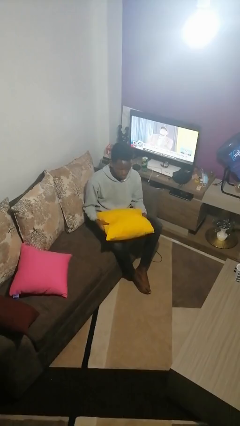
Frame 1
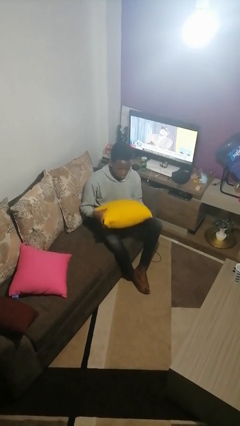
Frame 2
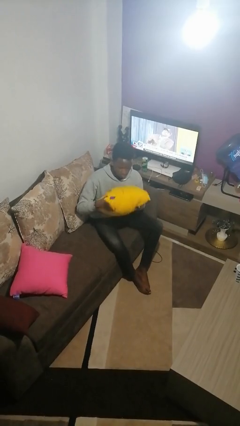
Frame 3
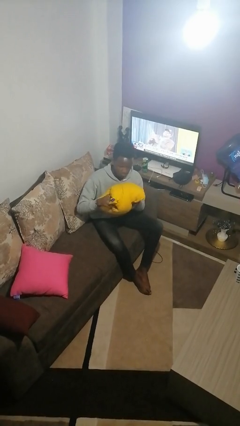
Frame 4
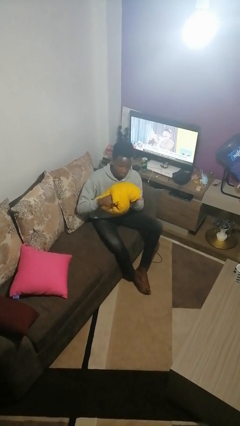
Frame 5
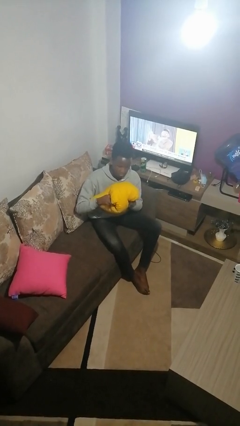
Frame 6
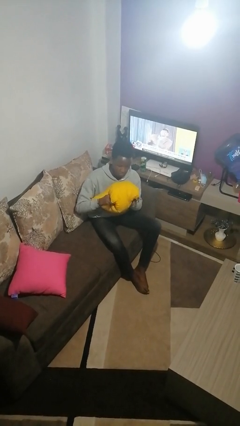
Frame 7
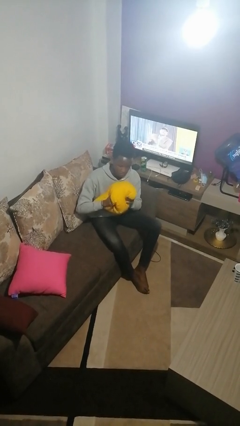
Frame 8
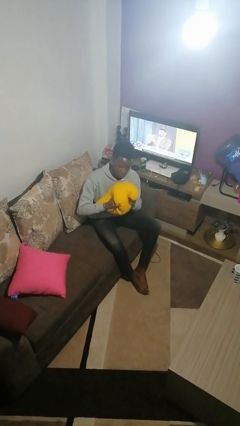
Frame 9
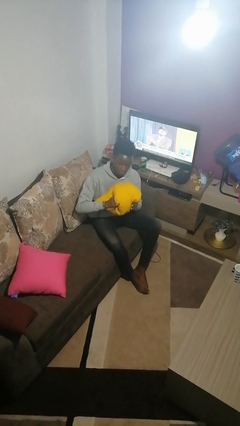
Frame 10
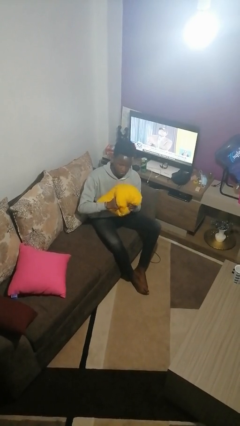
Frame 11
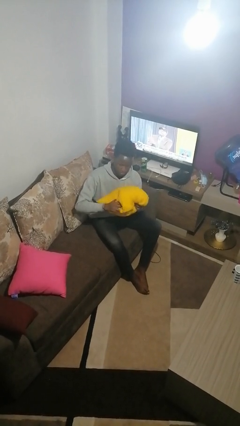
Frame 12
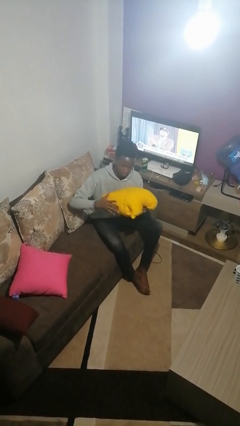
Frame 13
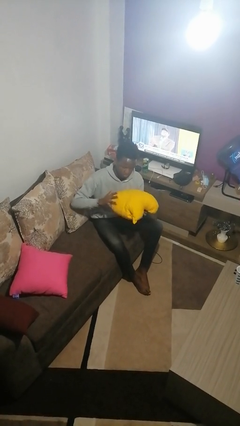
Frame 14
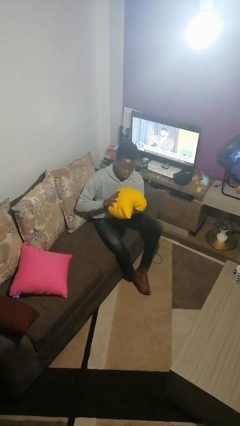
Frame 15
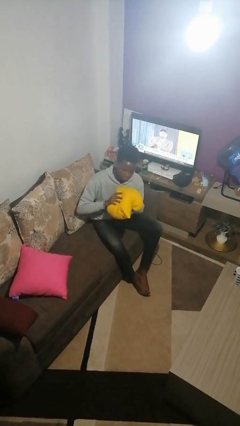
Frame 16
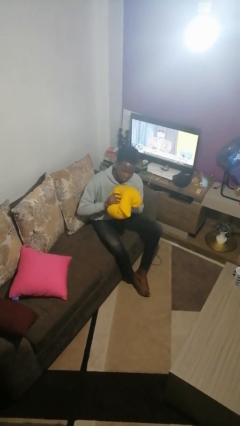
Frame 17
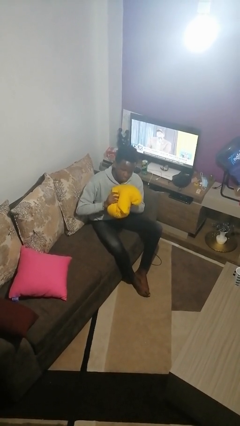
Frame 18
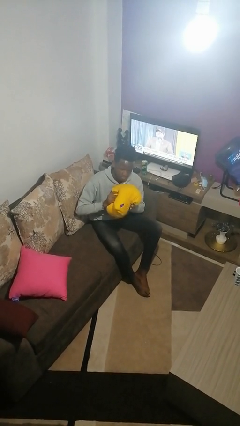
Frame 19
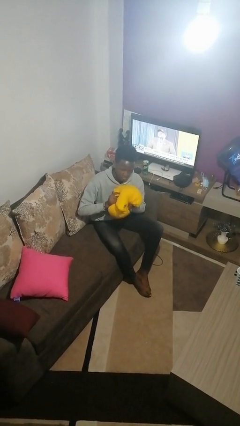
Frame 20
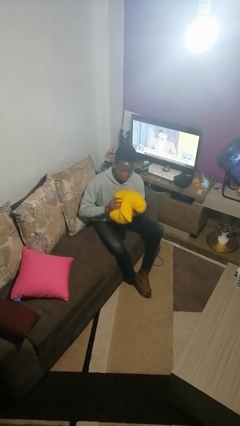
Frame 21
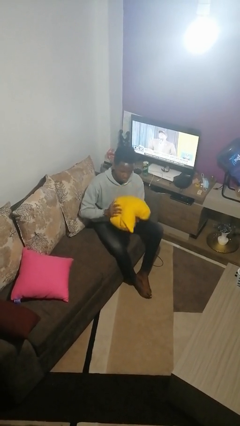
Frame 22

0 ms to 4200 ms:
person squeezes object

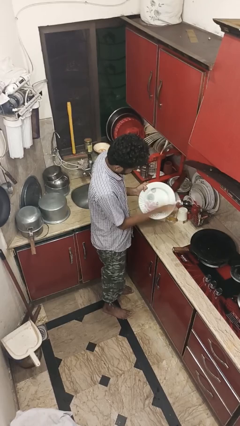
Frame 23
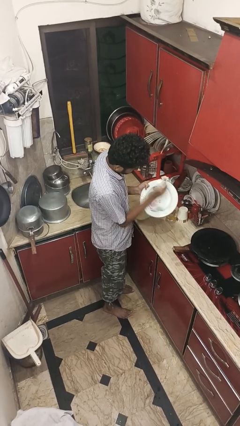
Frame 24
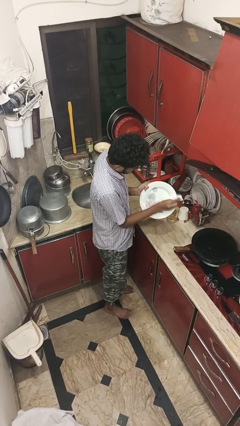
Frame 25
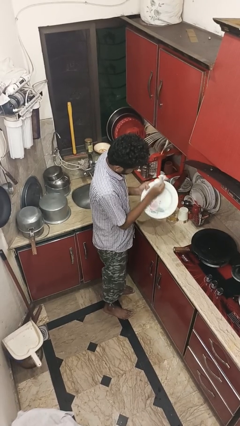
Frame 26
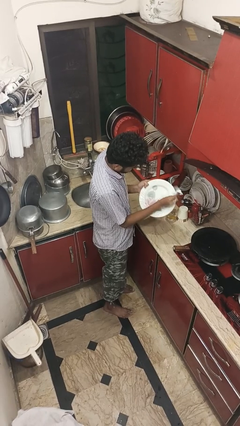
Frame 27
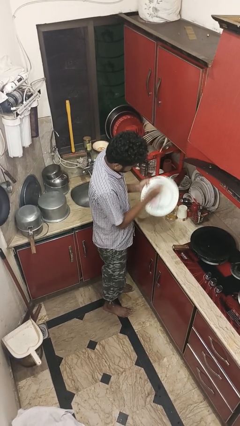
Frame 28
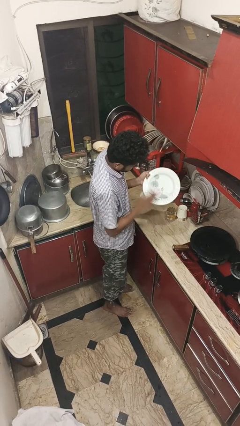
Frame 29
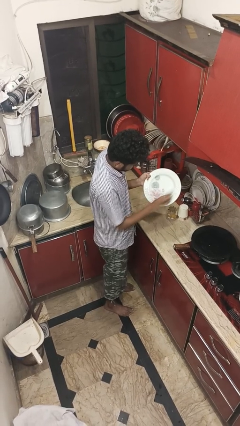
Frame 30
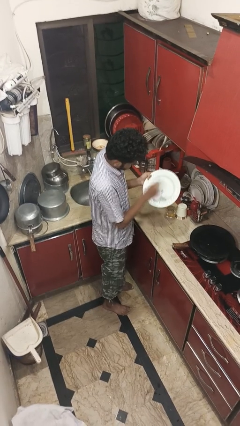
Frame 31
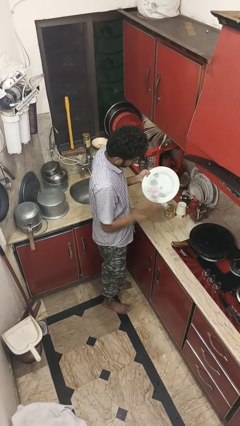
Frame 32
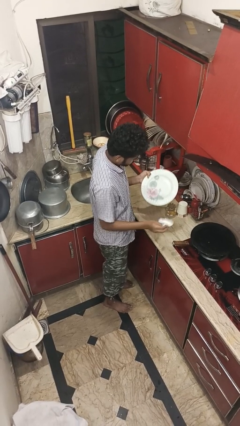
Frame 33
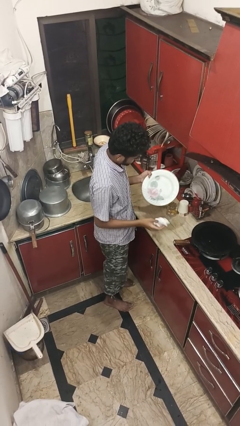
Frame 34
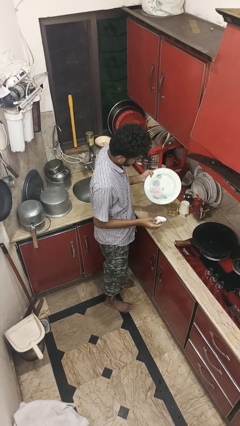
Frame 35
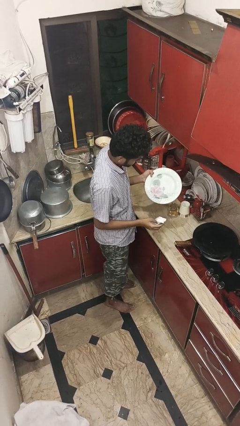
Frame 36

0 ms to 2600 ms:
person dries dish

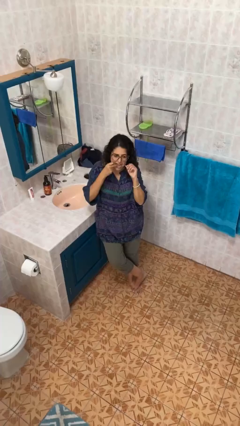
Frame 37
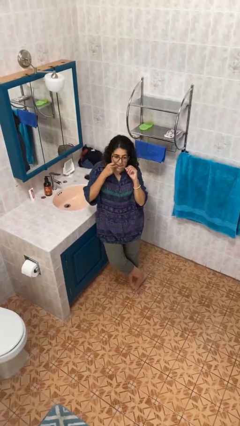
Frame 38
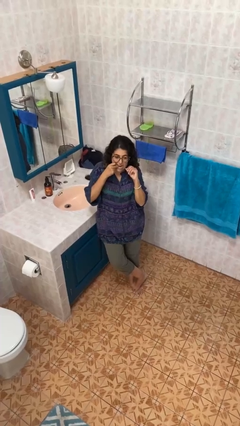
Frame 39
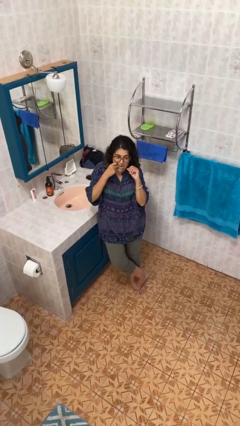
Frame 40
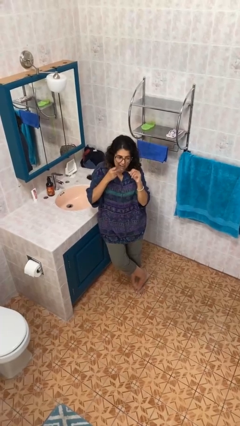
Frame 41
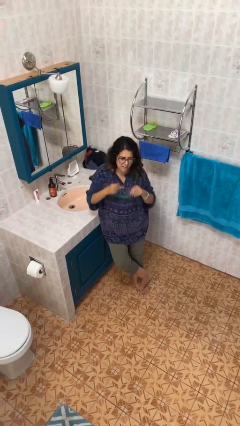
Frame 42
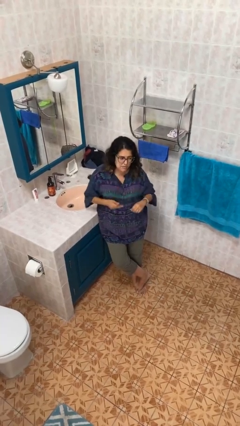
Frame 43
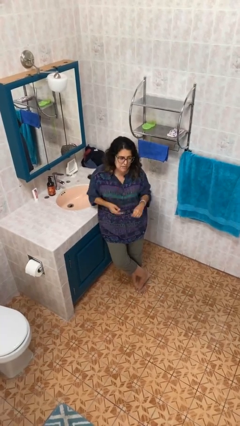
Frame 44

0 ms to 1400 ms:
person flosses

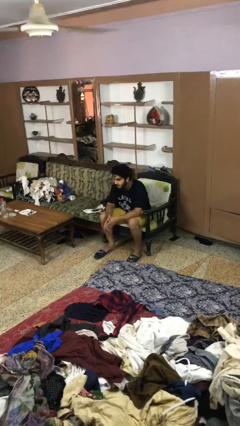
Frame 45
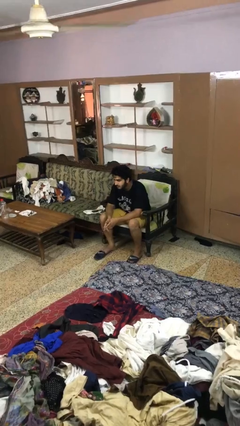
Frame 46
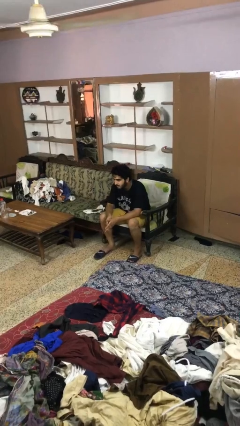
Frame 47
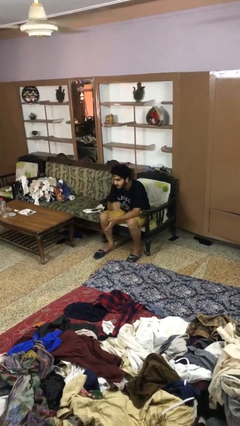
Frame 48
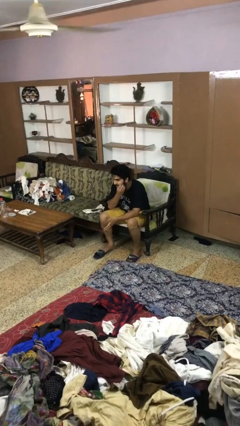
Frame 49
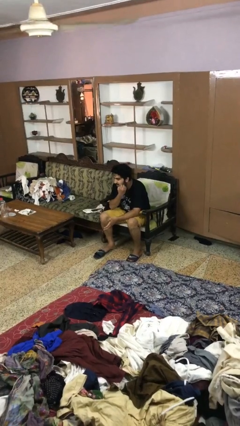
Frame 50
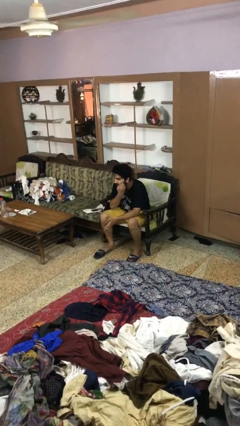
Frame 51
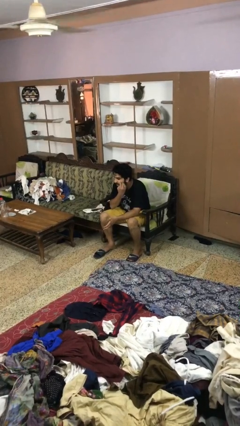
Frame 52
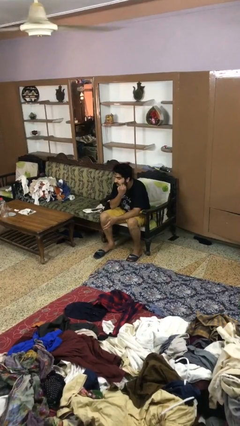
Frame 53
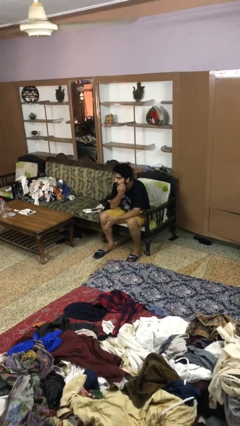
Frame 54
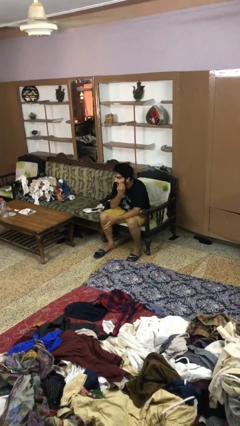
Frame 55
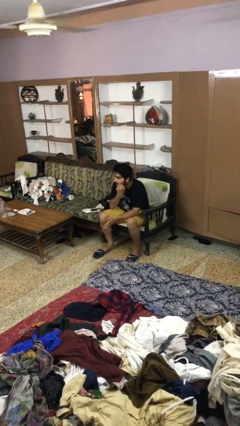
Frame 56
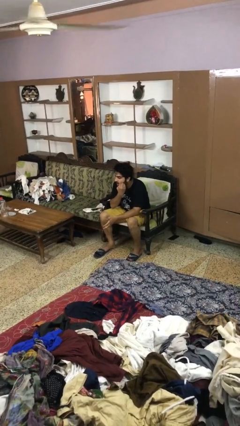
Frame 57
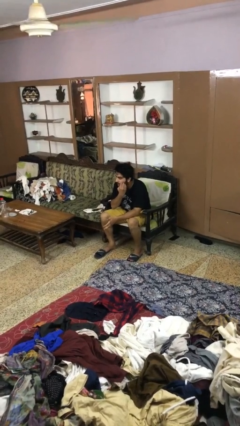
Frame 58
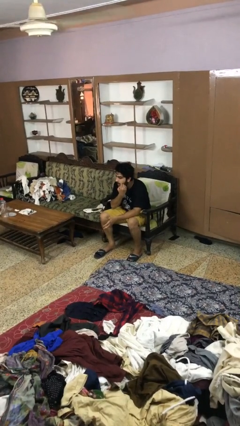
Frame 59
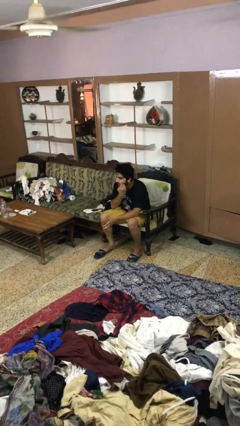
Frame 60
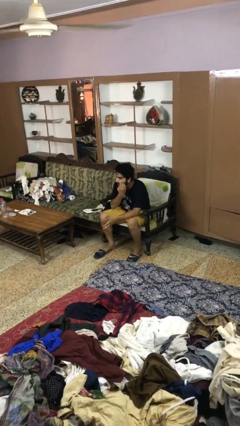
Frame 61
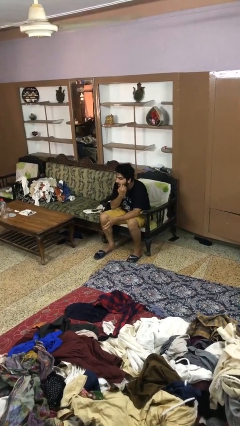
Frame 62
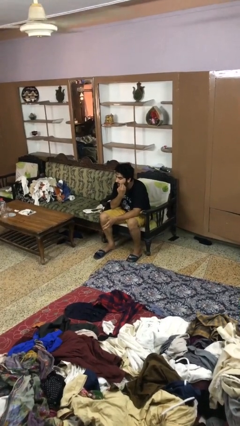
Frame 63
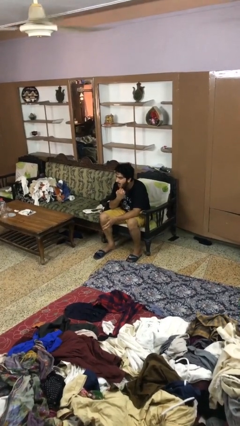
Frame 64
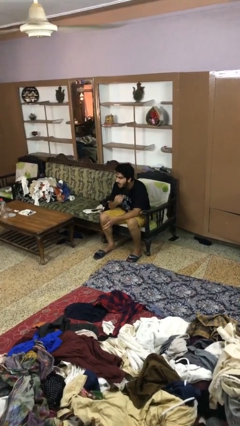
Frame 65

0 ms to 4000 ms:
person scratches face

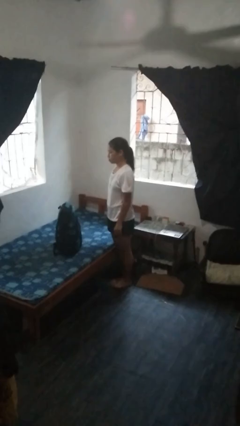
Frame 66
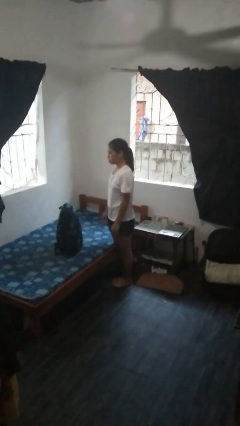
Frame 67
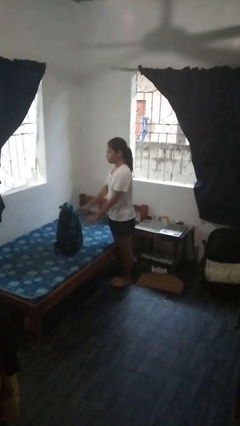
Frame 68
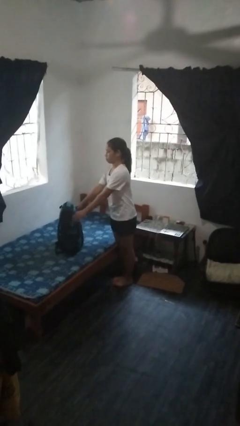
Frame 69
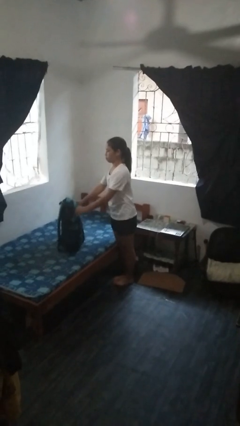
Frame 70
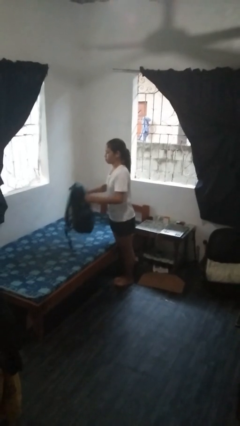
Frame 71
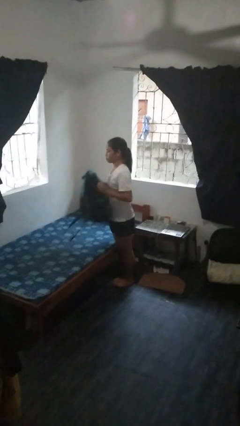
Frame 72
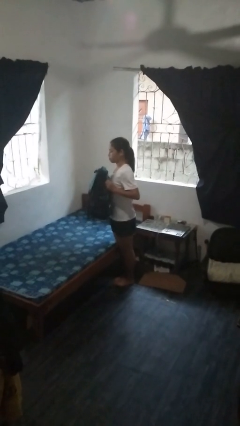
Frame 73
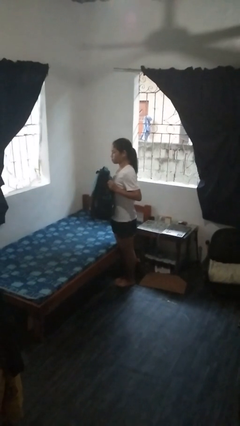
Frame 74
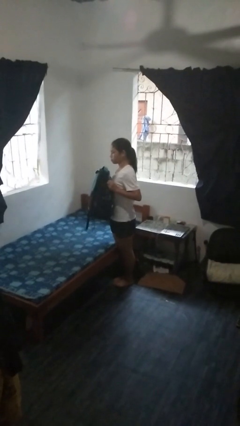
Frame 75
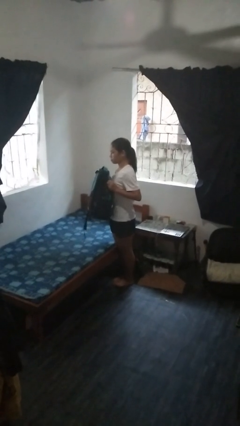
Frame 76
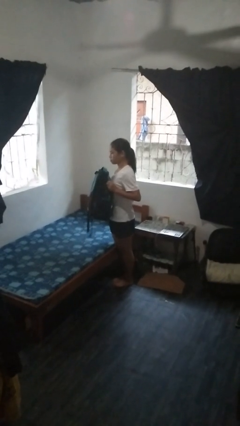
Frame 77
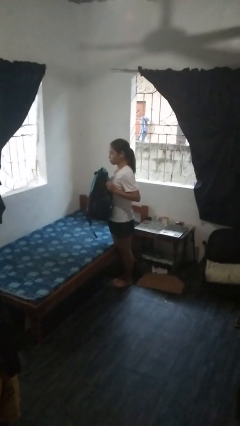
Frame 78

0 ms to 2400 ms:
person picks up object from bed

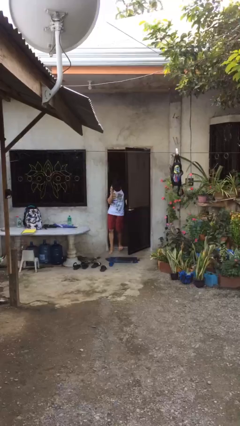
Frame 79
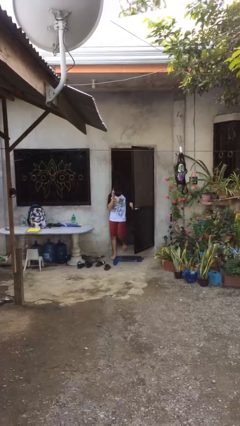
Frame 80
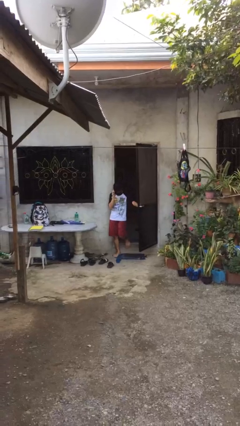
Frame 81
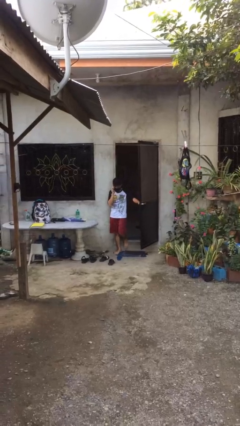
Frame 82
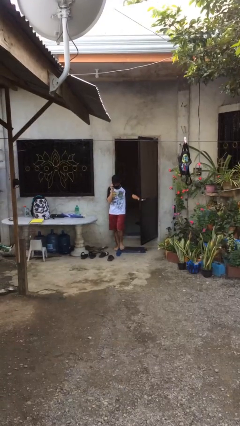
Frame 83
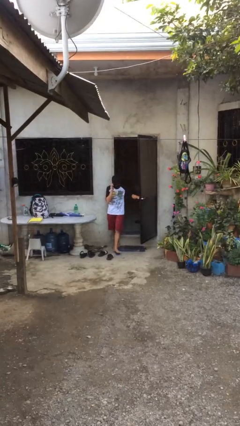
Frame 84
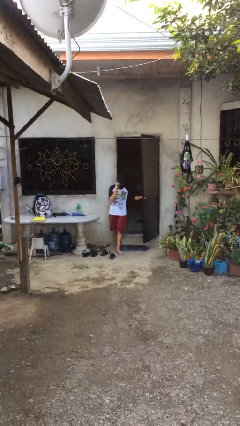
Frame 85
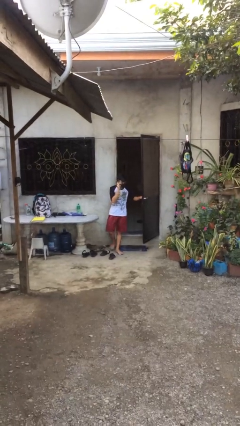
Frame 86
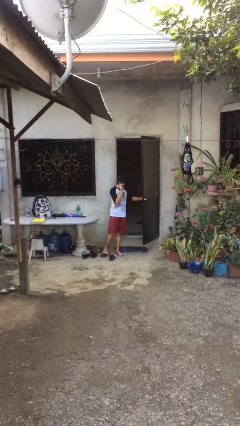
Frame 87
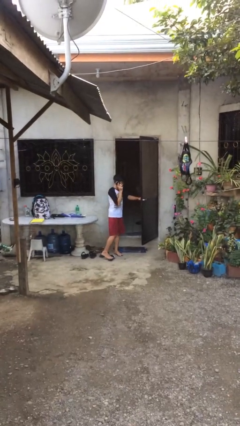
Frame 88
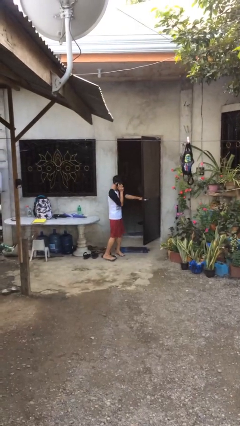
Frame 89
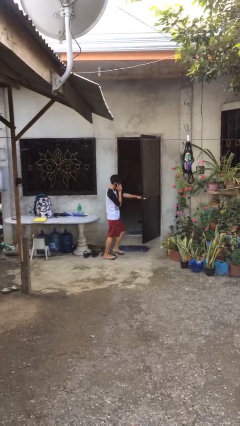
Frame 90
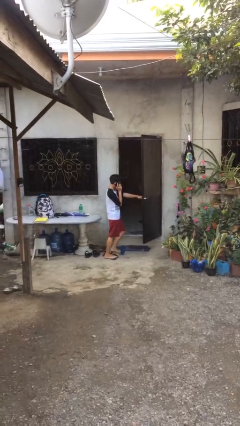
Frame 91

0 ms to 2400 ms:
person enters scene through structure

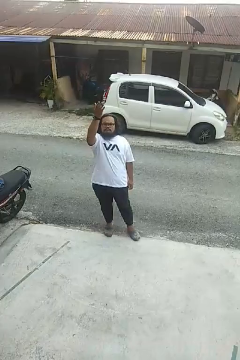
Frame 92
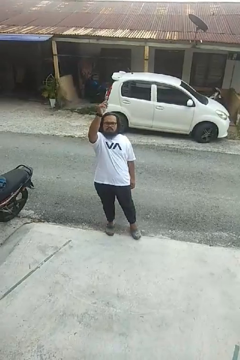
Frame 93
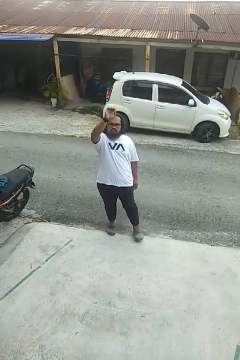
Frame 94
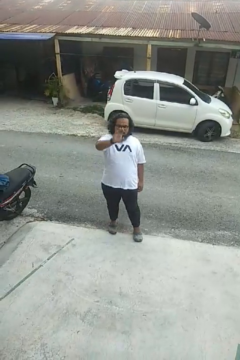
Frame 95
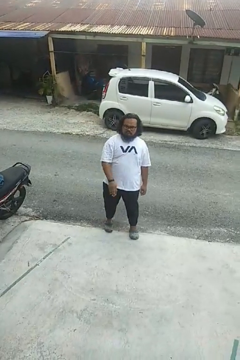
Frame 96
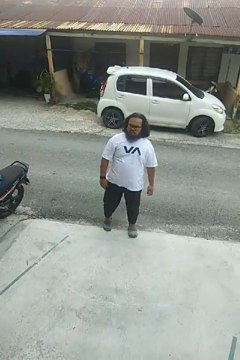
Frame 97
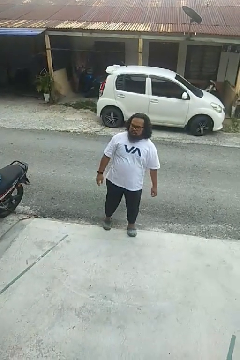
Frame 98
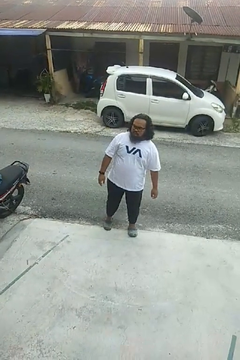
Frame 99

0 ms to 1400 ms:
person gestures swipe down
